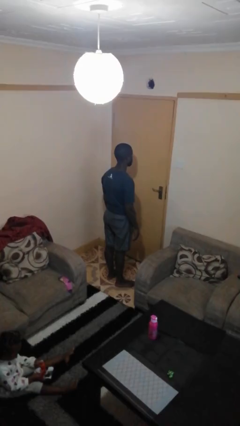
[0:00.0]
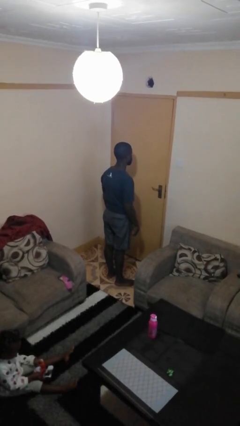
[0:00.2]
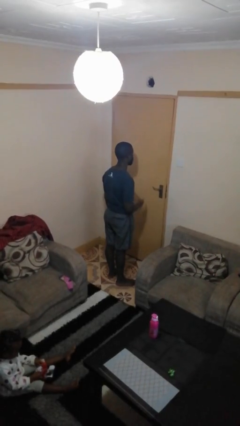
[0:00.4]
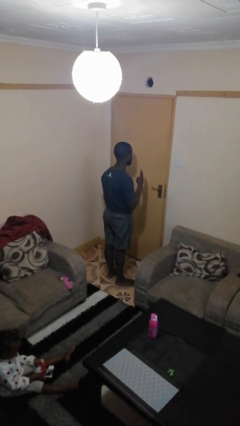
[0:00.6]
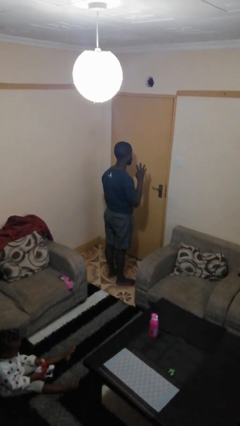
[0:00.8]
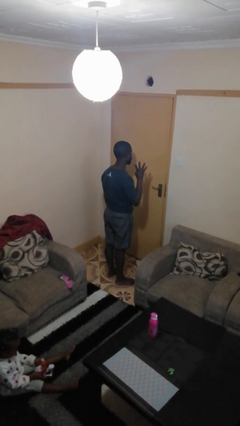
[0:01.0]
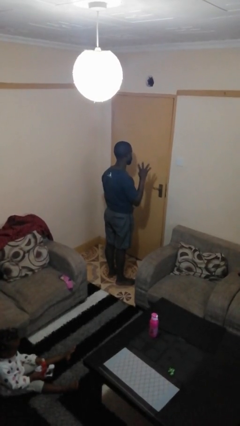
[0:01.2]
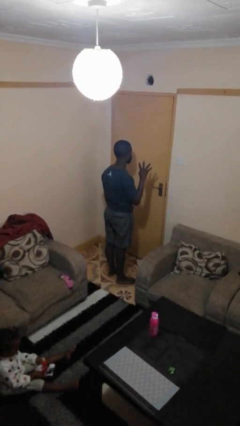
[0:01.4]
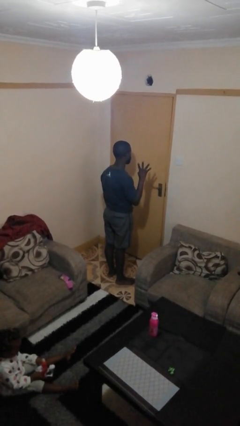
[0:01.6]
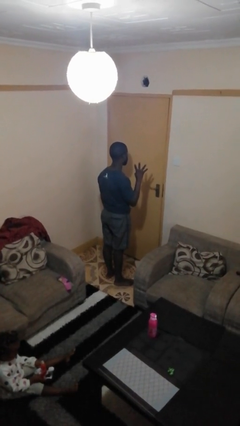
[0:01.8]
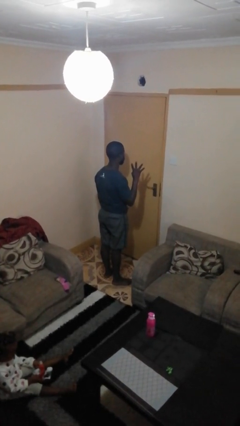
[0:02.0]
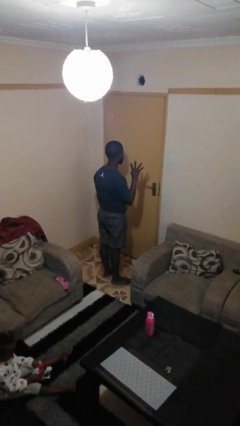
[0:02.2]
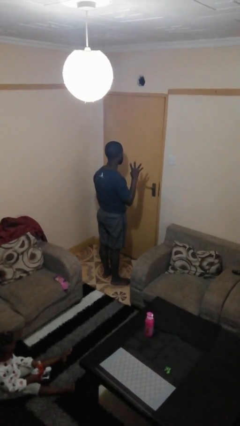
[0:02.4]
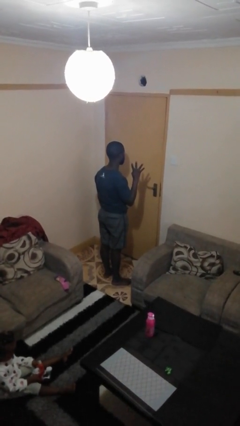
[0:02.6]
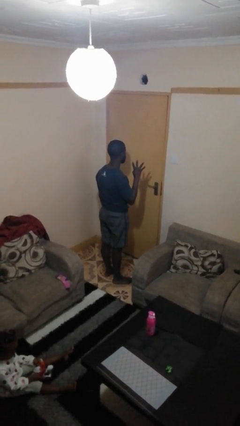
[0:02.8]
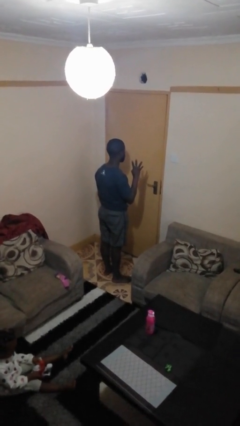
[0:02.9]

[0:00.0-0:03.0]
person gestures number four

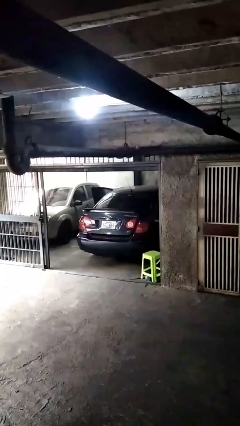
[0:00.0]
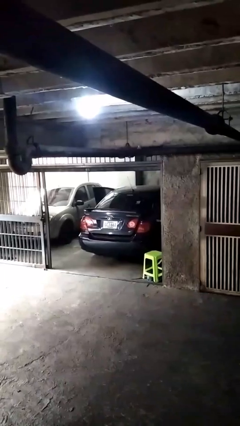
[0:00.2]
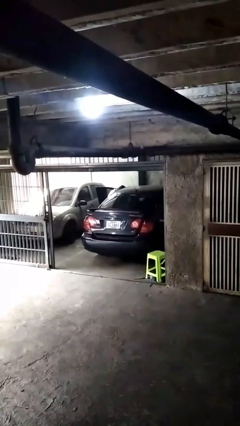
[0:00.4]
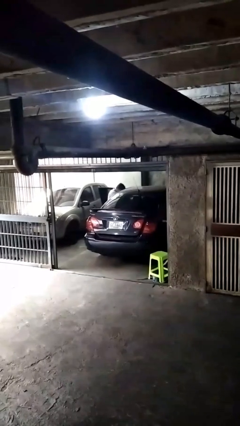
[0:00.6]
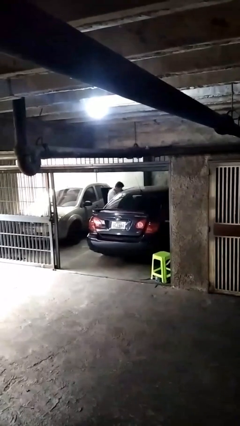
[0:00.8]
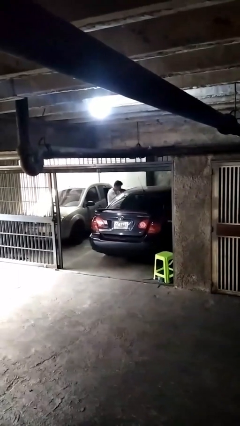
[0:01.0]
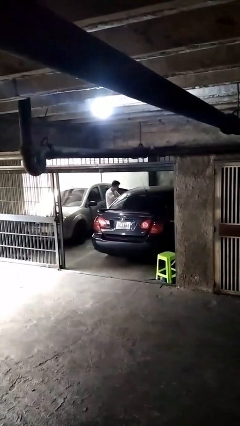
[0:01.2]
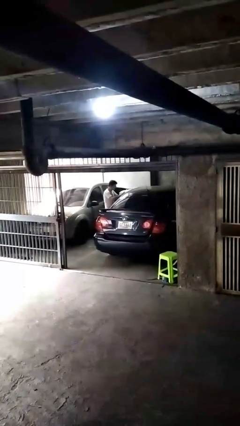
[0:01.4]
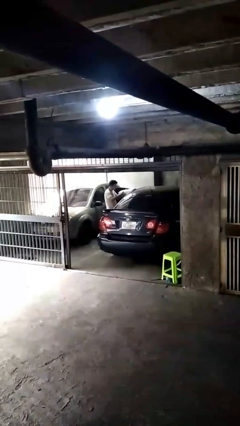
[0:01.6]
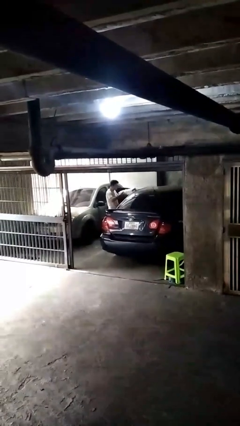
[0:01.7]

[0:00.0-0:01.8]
person unloads car

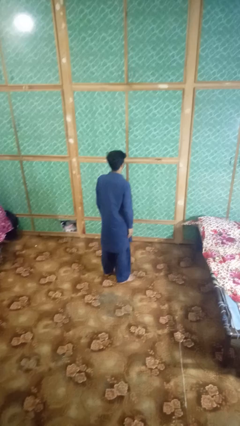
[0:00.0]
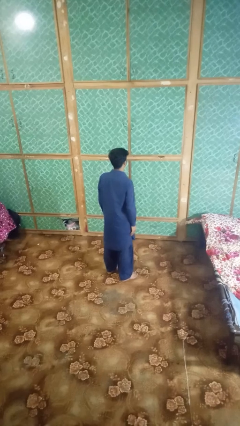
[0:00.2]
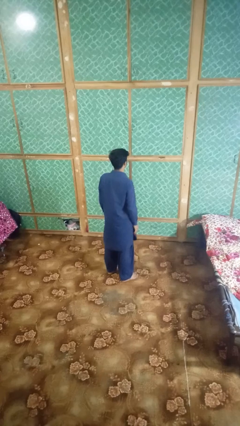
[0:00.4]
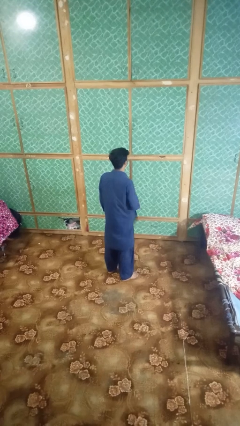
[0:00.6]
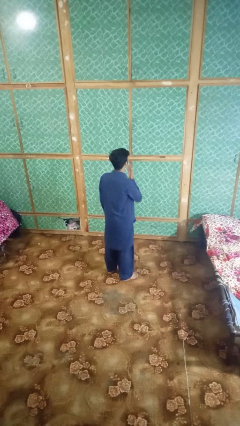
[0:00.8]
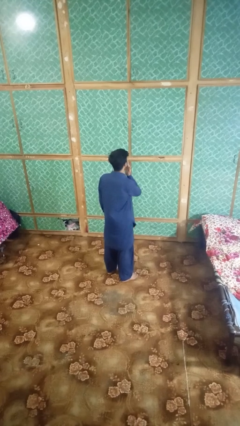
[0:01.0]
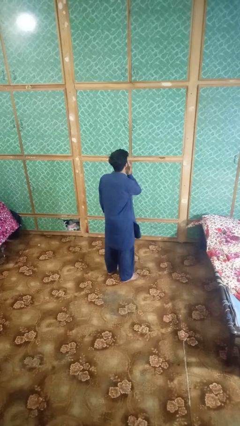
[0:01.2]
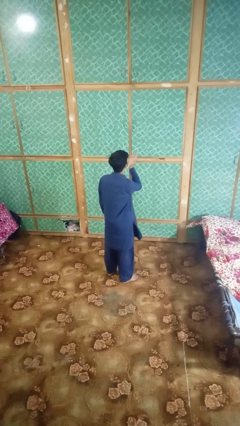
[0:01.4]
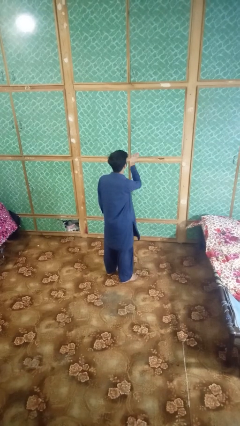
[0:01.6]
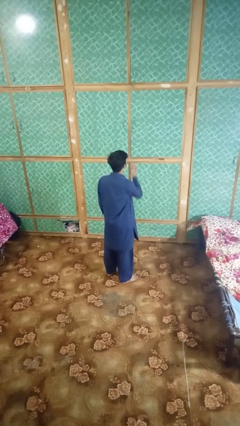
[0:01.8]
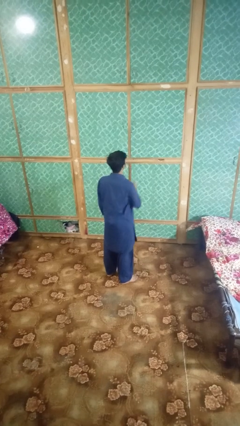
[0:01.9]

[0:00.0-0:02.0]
person gestures blow kiss

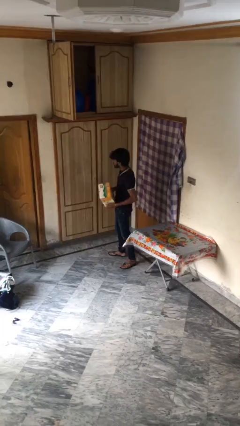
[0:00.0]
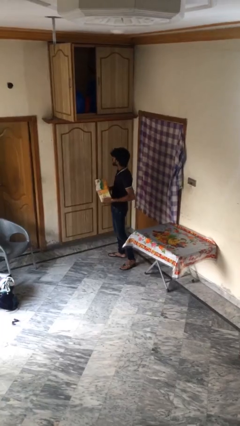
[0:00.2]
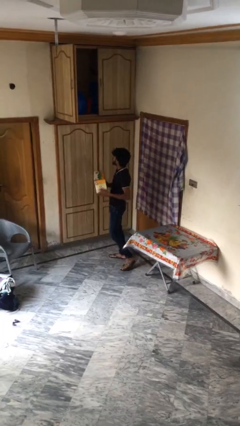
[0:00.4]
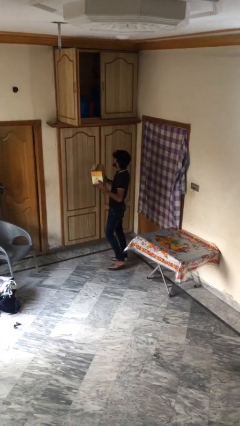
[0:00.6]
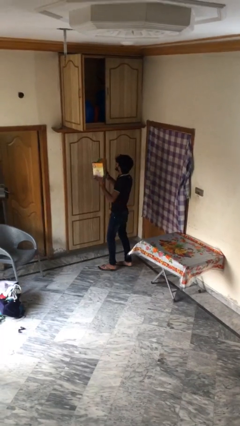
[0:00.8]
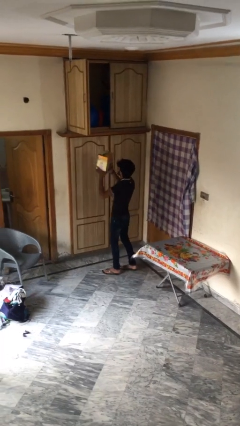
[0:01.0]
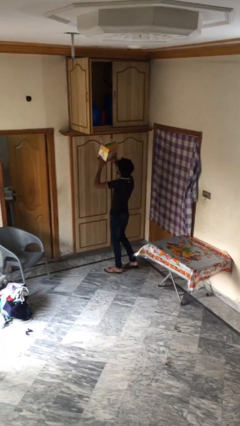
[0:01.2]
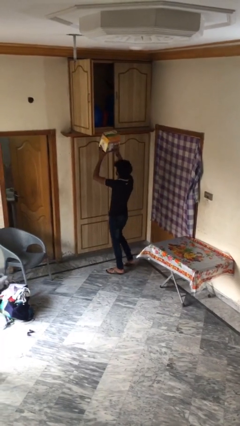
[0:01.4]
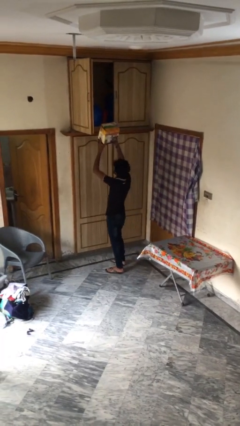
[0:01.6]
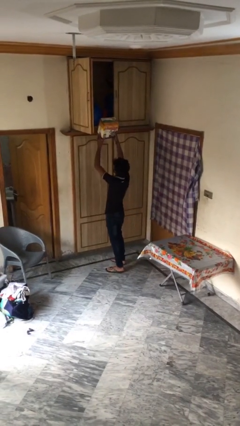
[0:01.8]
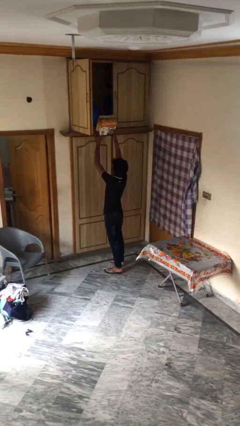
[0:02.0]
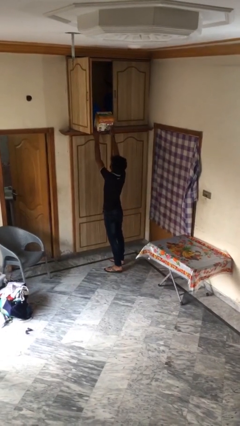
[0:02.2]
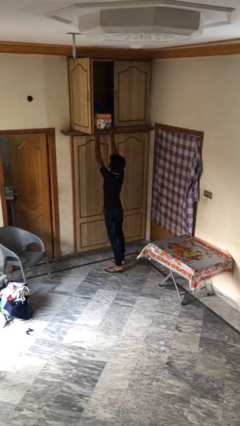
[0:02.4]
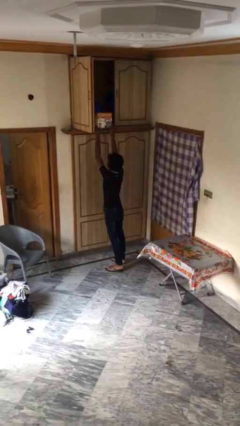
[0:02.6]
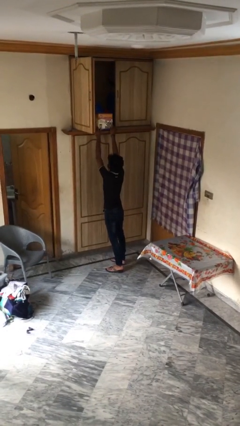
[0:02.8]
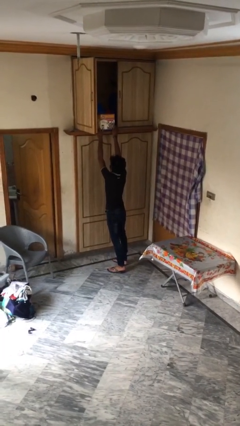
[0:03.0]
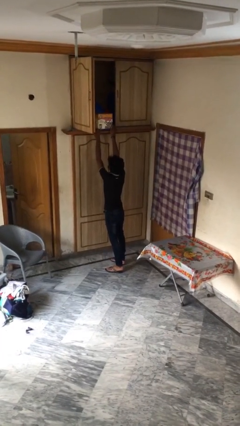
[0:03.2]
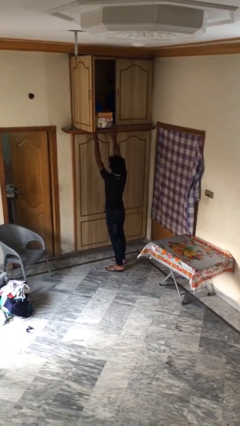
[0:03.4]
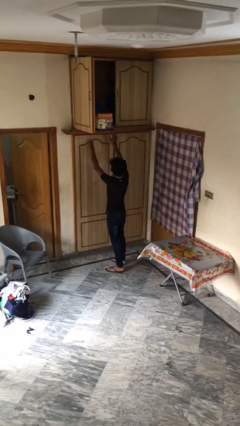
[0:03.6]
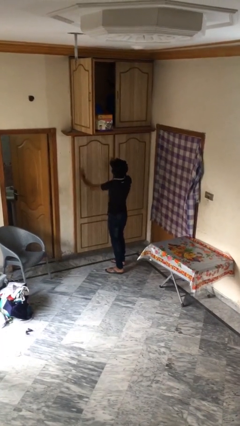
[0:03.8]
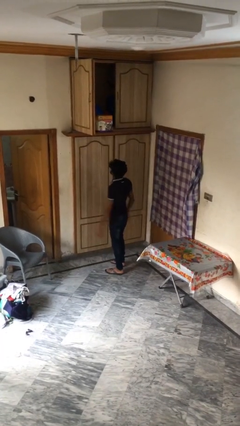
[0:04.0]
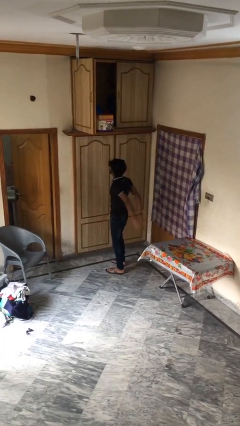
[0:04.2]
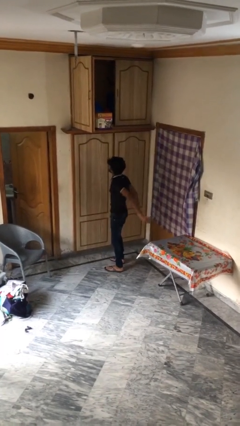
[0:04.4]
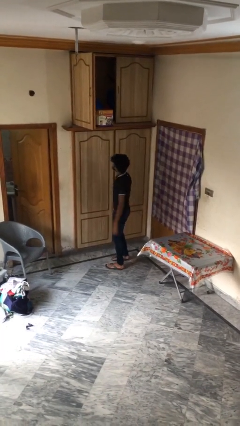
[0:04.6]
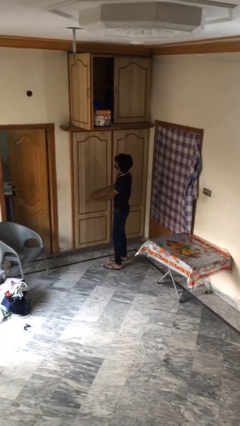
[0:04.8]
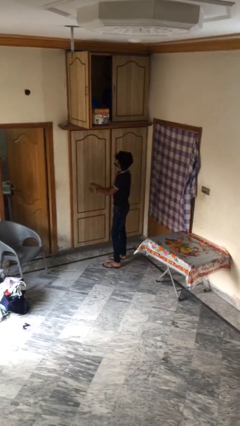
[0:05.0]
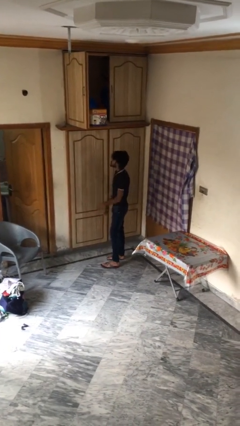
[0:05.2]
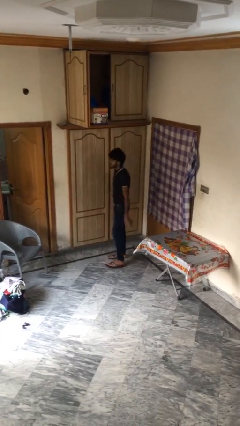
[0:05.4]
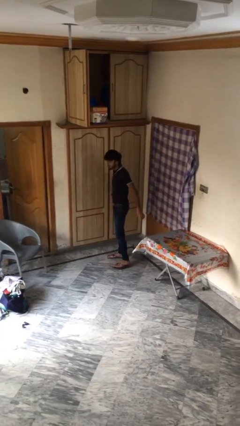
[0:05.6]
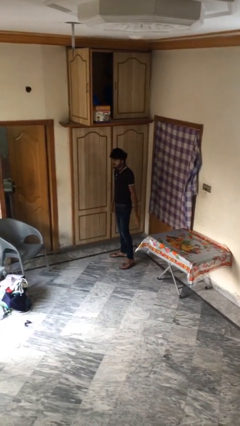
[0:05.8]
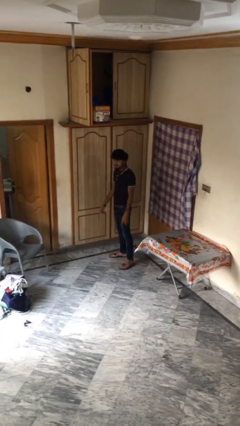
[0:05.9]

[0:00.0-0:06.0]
person puts down object on shelf

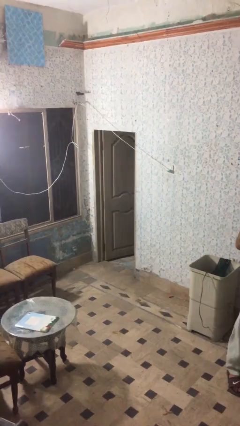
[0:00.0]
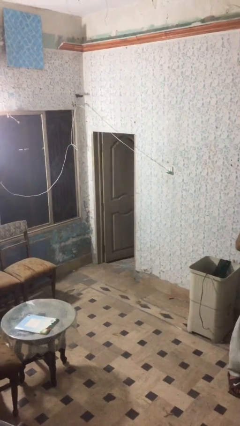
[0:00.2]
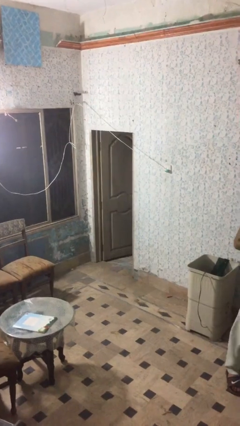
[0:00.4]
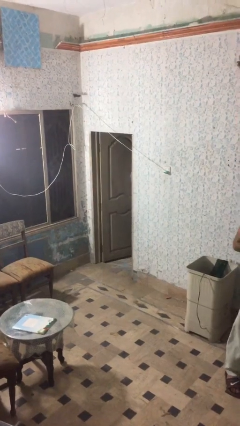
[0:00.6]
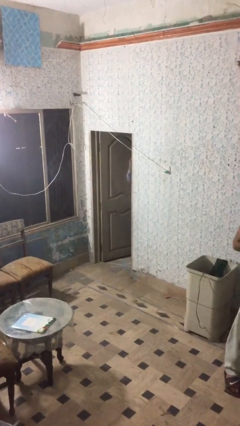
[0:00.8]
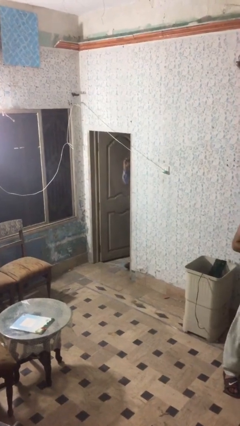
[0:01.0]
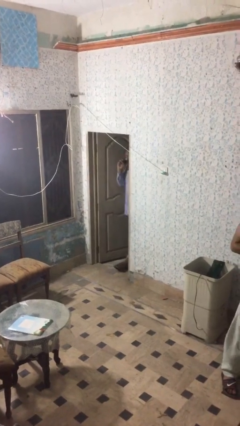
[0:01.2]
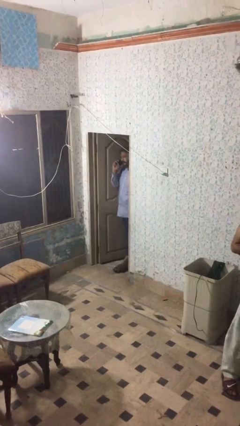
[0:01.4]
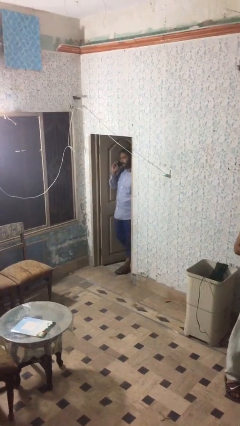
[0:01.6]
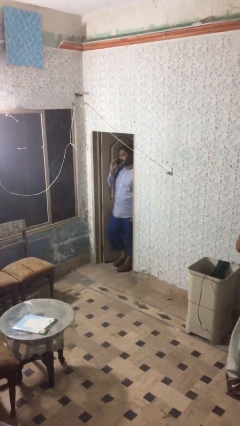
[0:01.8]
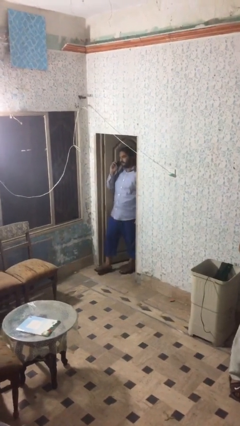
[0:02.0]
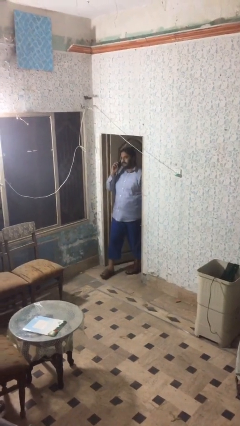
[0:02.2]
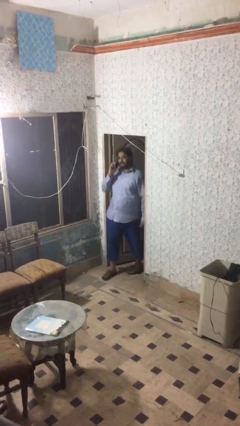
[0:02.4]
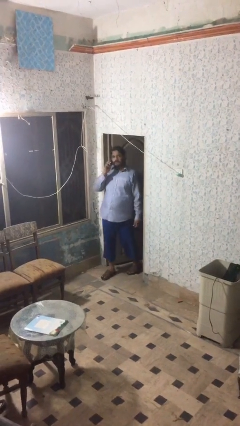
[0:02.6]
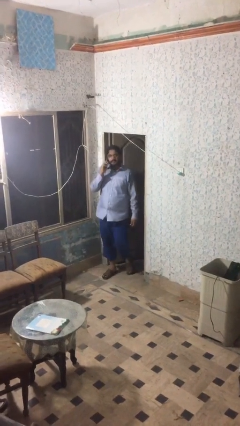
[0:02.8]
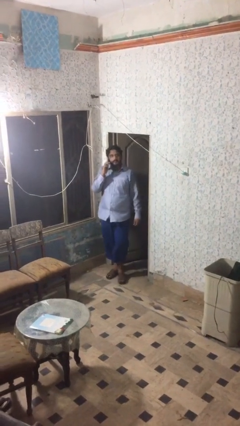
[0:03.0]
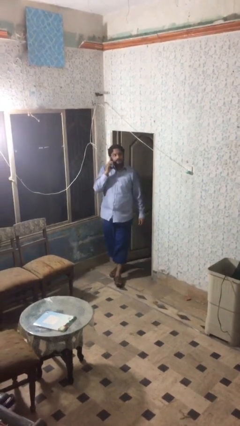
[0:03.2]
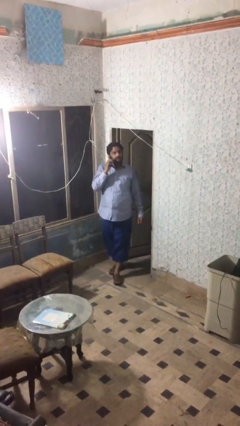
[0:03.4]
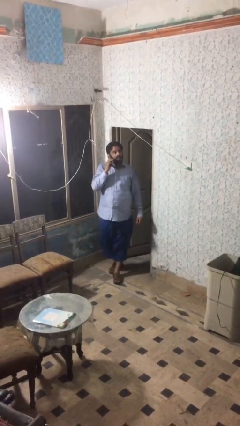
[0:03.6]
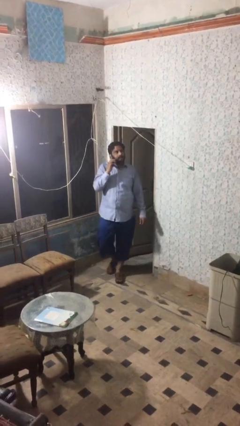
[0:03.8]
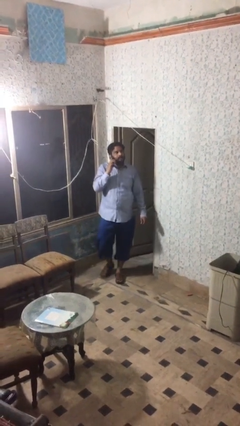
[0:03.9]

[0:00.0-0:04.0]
person enters scene through structure

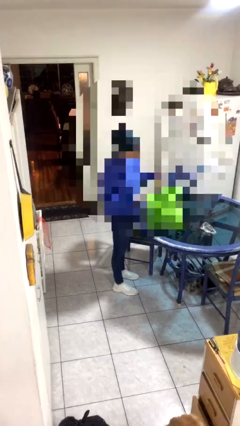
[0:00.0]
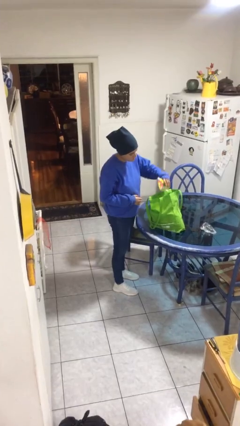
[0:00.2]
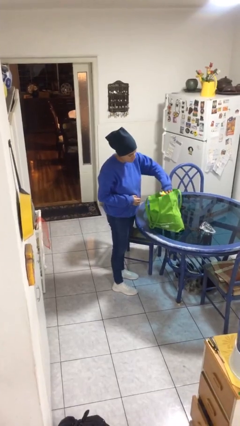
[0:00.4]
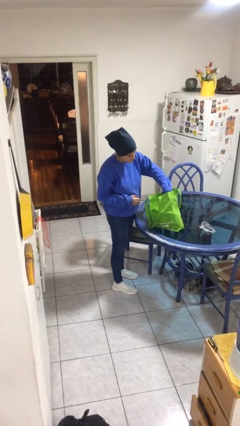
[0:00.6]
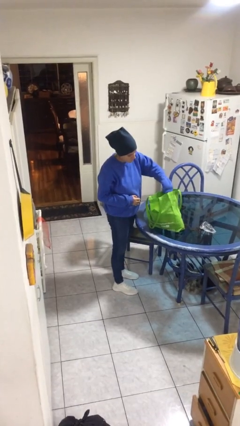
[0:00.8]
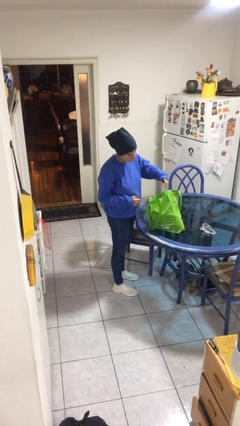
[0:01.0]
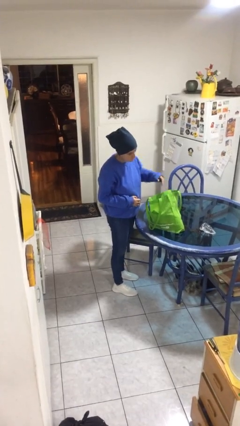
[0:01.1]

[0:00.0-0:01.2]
person puts object into bag
